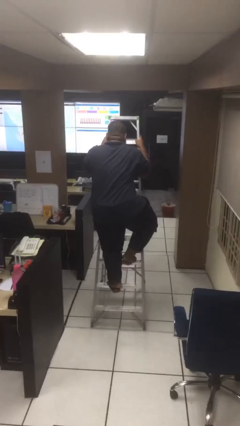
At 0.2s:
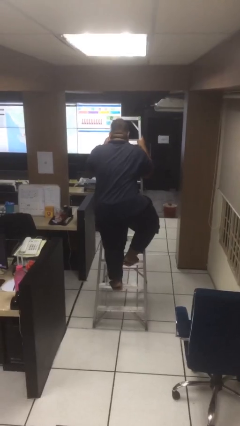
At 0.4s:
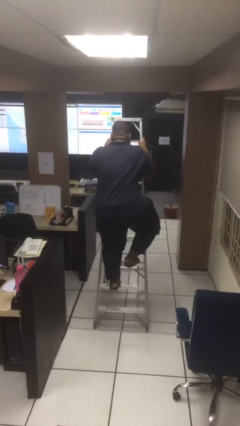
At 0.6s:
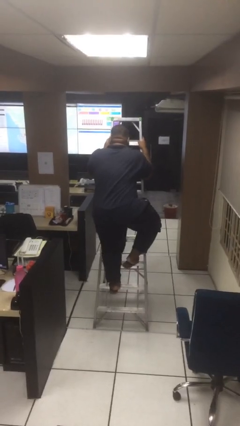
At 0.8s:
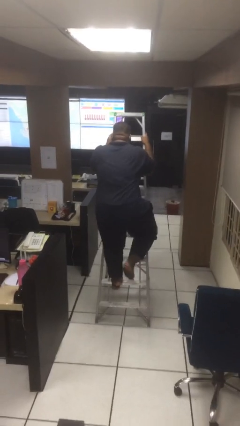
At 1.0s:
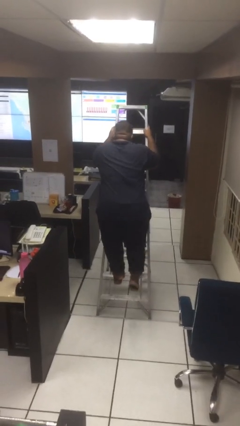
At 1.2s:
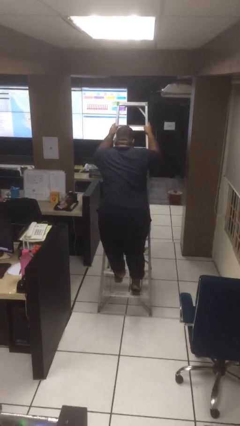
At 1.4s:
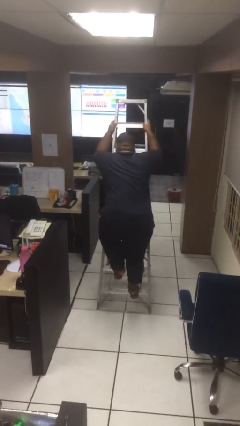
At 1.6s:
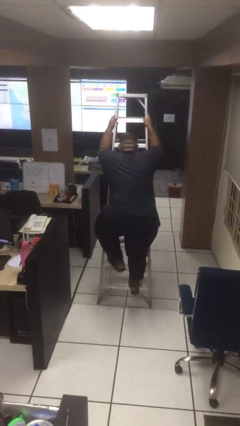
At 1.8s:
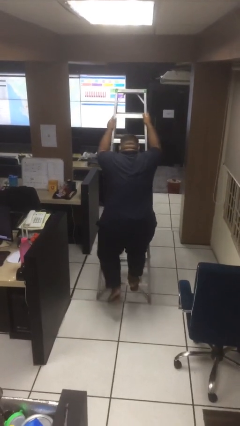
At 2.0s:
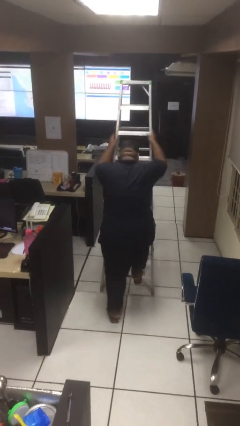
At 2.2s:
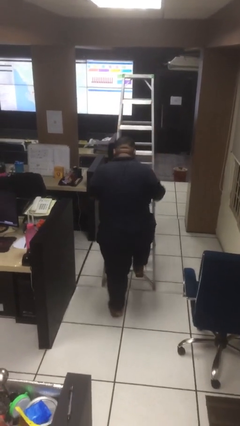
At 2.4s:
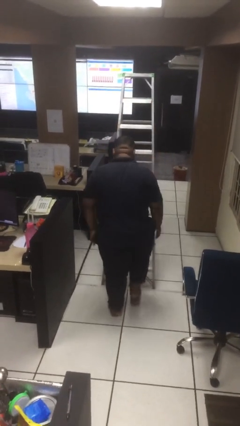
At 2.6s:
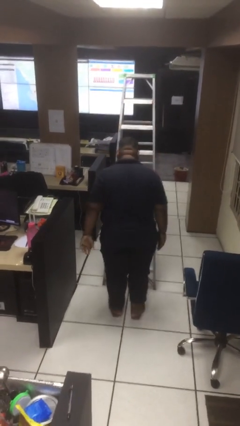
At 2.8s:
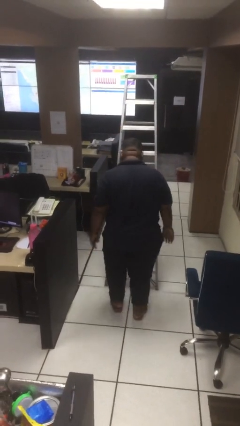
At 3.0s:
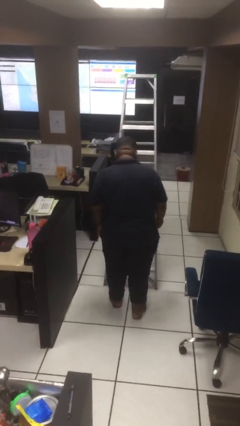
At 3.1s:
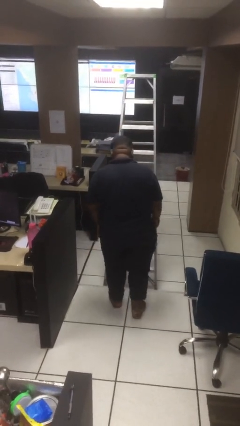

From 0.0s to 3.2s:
person climbs down ladder

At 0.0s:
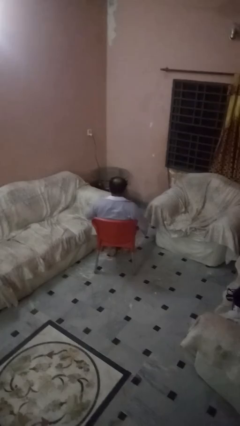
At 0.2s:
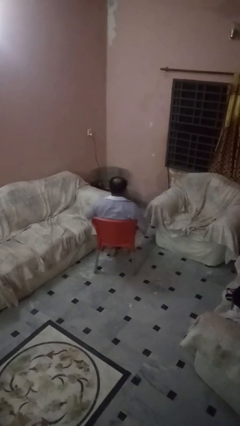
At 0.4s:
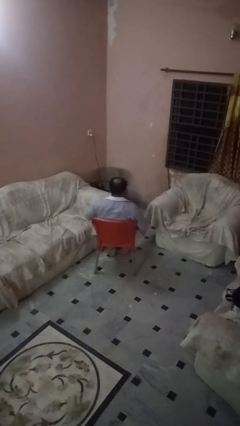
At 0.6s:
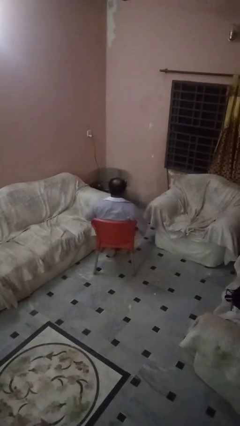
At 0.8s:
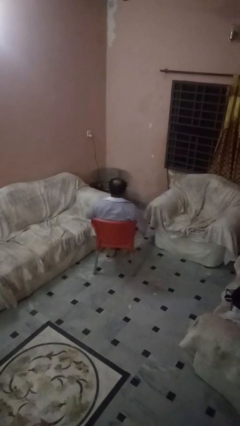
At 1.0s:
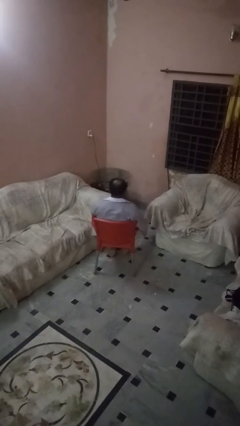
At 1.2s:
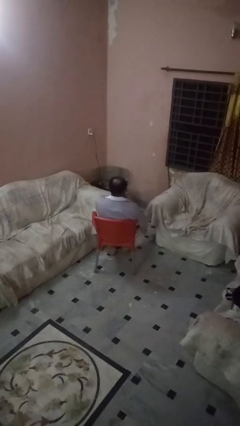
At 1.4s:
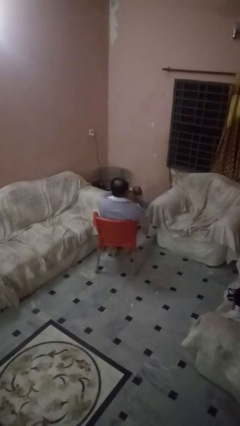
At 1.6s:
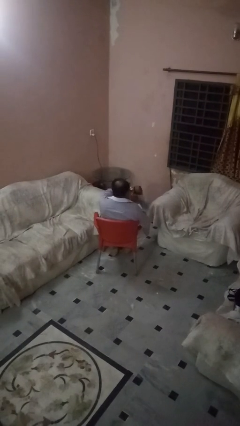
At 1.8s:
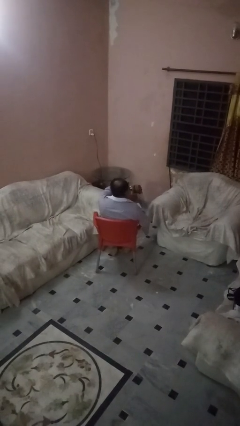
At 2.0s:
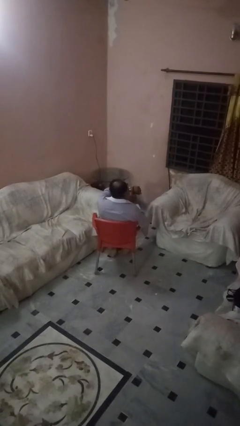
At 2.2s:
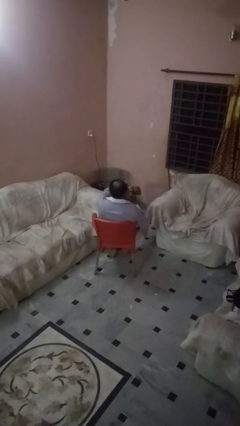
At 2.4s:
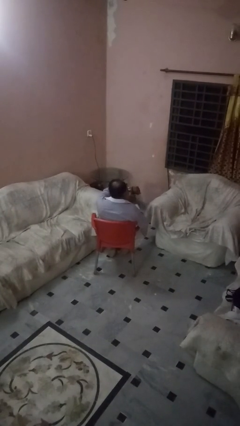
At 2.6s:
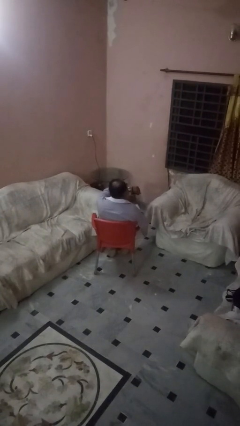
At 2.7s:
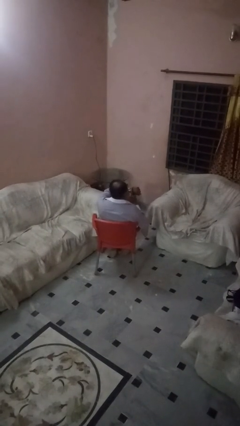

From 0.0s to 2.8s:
person gestures watch closely

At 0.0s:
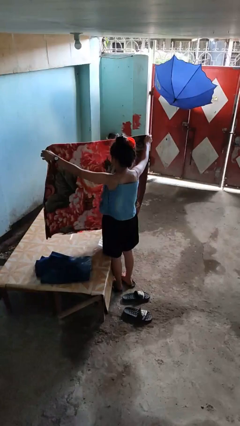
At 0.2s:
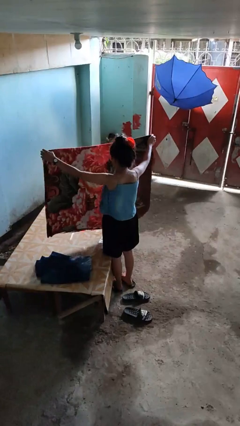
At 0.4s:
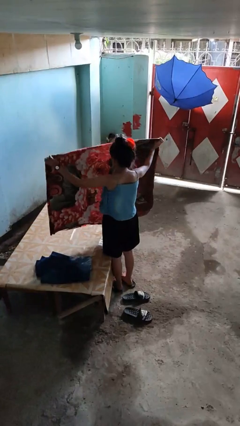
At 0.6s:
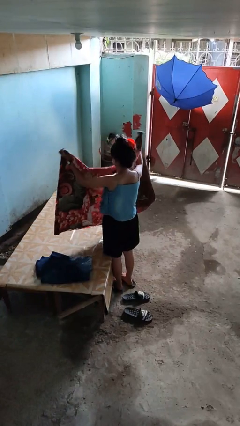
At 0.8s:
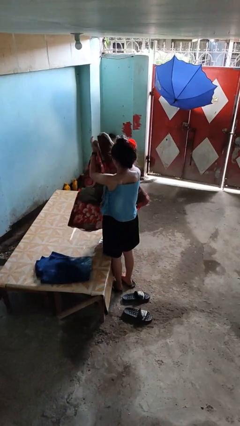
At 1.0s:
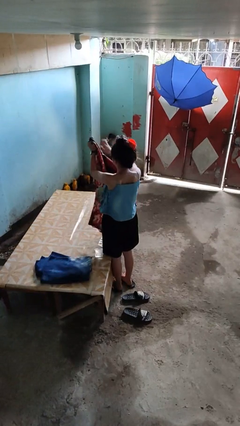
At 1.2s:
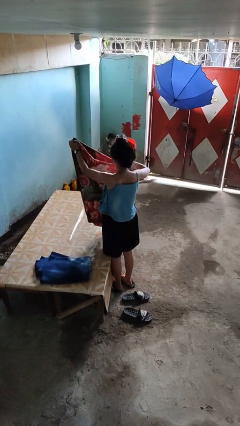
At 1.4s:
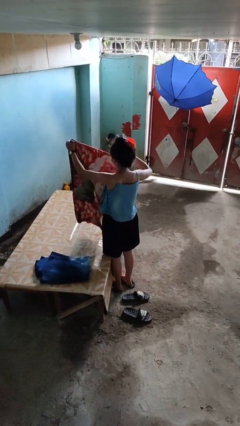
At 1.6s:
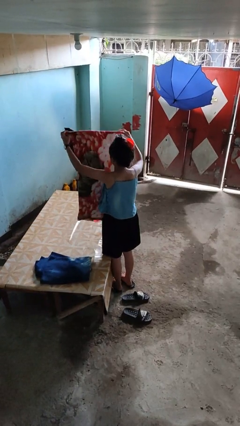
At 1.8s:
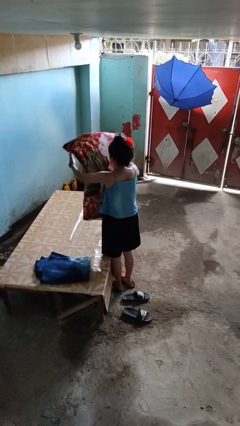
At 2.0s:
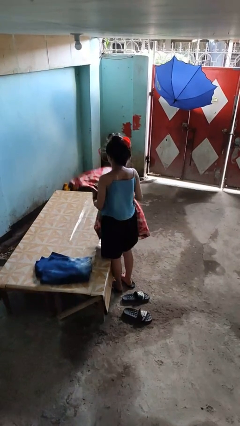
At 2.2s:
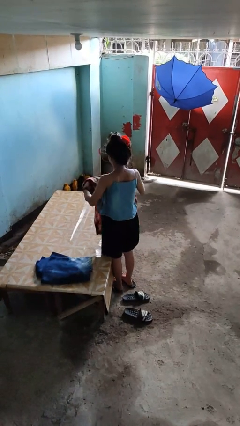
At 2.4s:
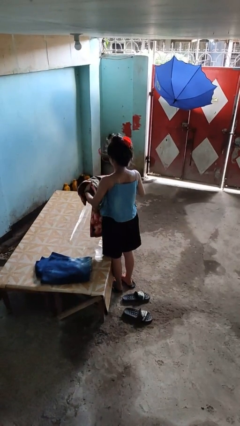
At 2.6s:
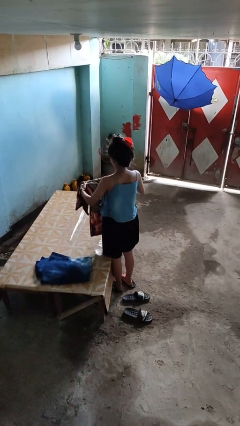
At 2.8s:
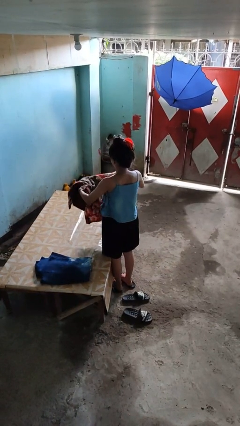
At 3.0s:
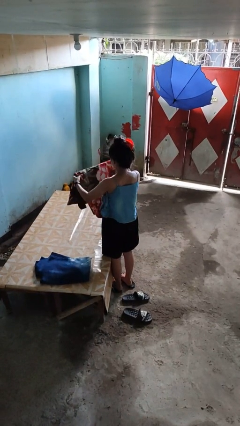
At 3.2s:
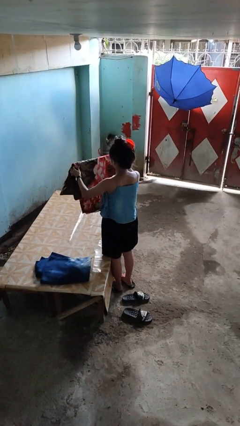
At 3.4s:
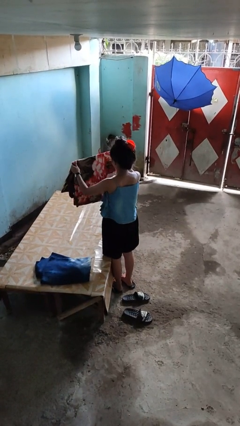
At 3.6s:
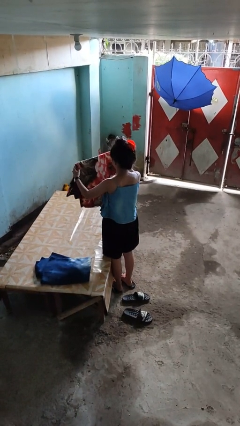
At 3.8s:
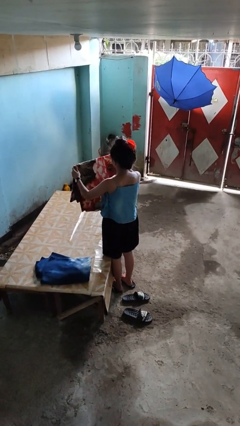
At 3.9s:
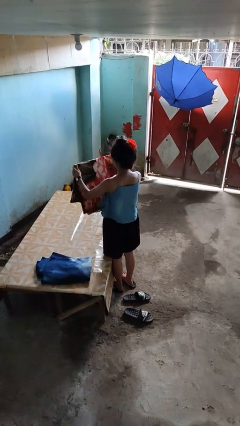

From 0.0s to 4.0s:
person folds blanket

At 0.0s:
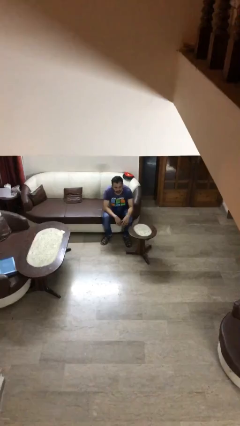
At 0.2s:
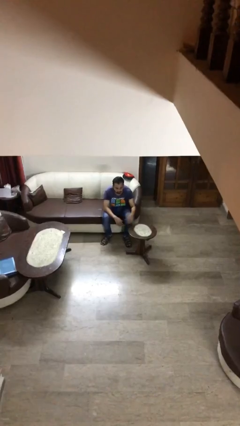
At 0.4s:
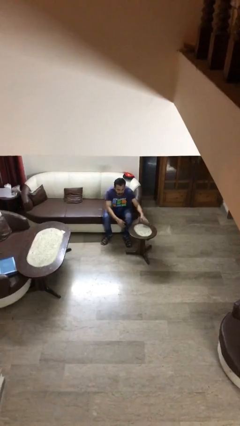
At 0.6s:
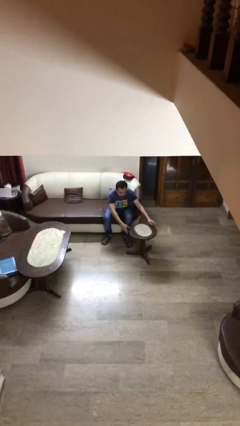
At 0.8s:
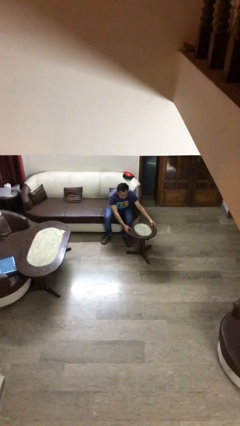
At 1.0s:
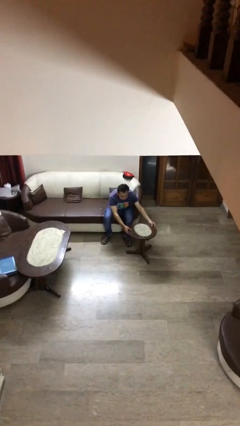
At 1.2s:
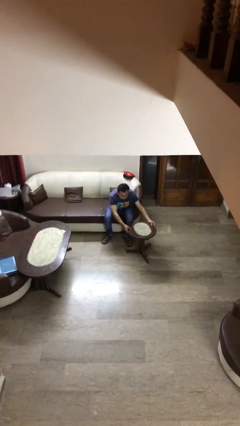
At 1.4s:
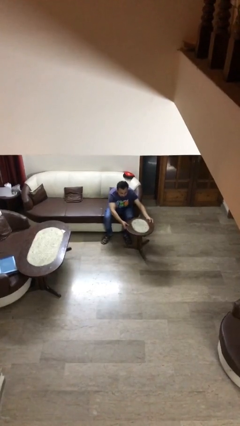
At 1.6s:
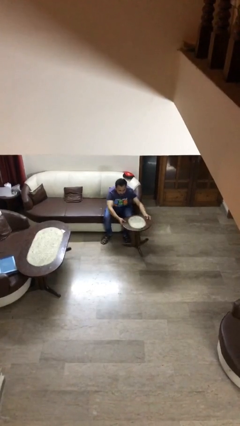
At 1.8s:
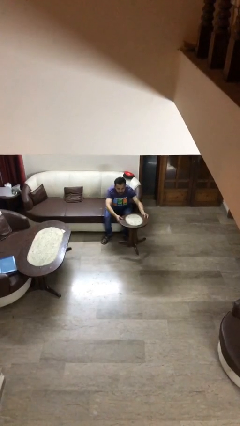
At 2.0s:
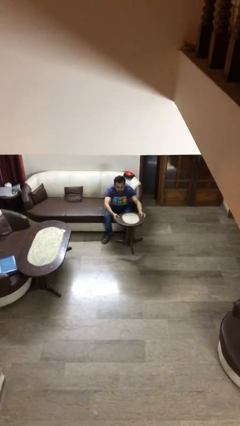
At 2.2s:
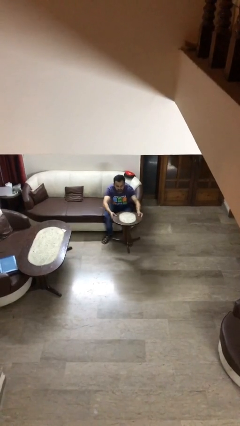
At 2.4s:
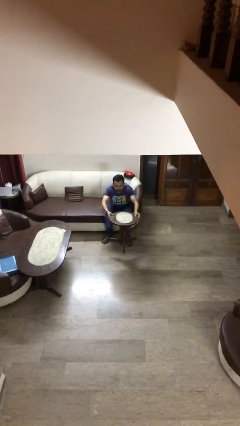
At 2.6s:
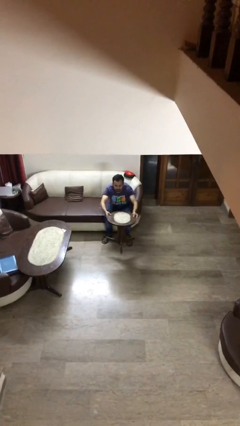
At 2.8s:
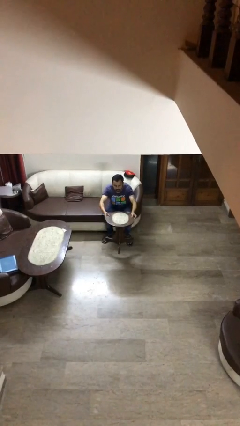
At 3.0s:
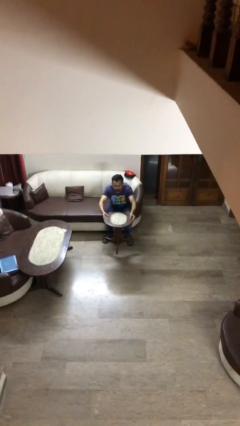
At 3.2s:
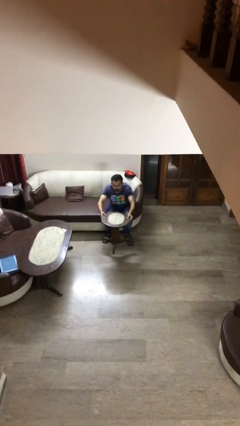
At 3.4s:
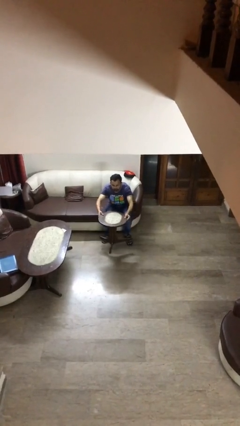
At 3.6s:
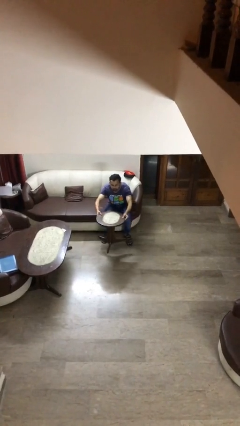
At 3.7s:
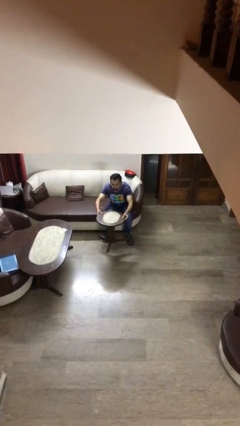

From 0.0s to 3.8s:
person picks up object from floor

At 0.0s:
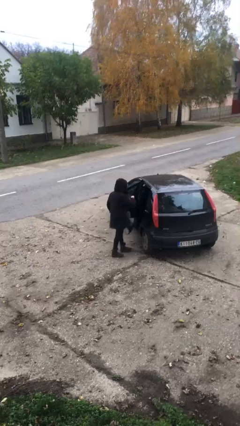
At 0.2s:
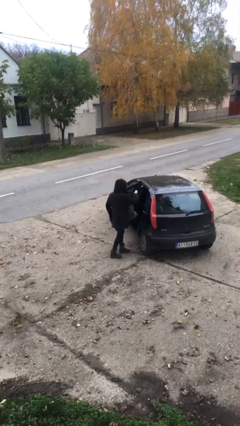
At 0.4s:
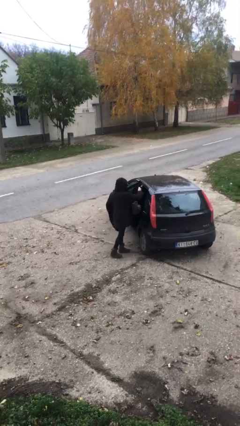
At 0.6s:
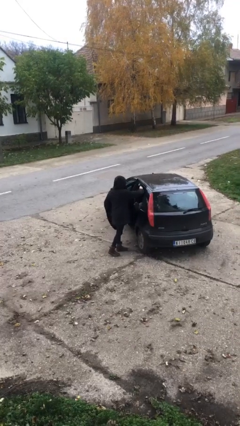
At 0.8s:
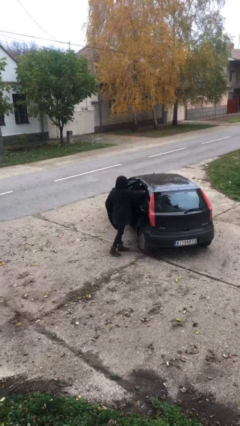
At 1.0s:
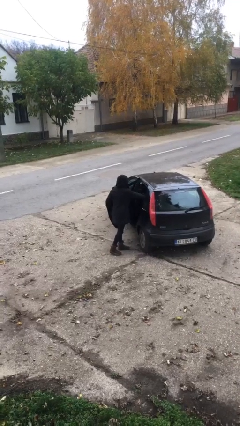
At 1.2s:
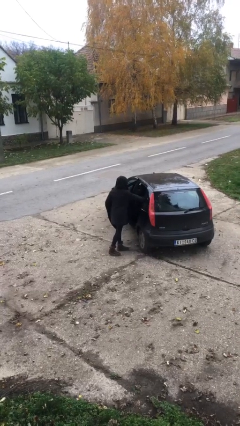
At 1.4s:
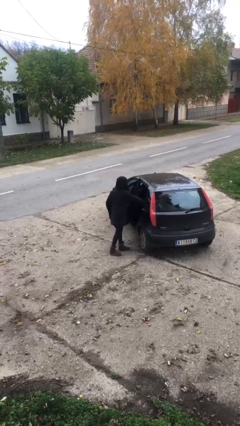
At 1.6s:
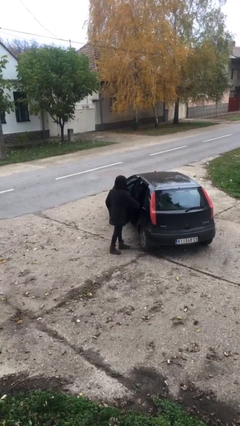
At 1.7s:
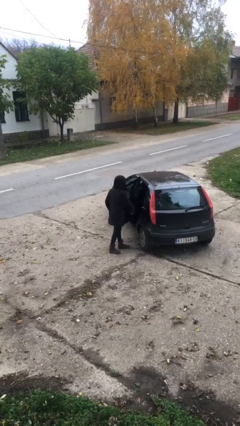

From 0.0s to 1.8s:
person loads car

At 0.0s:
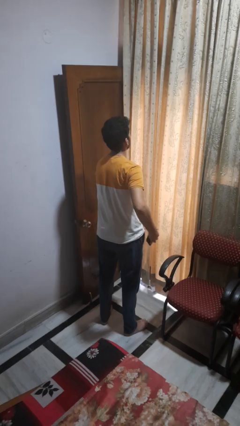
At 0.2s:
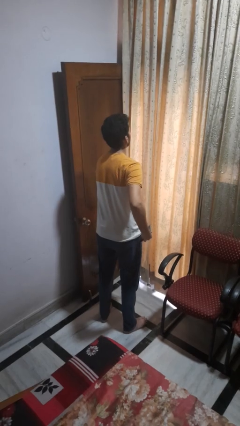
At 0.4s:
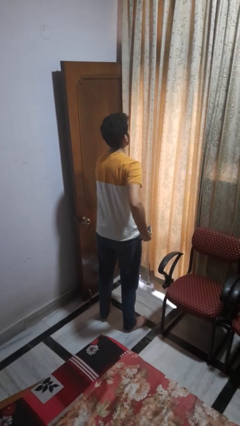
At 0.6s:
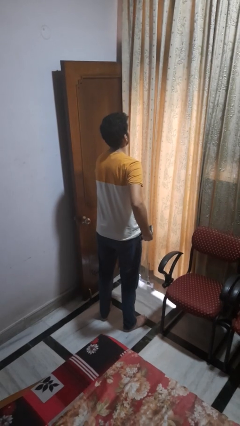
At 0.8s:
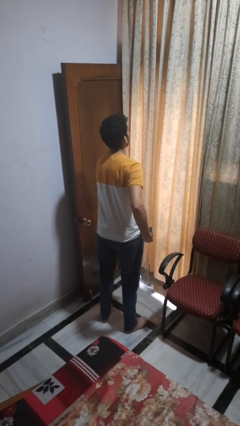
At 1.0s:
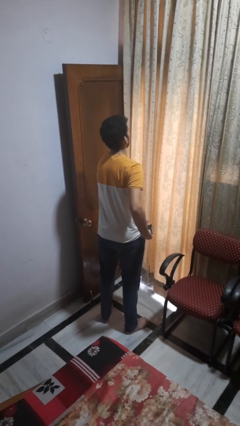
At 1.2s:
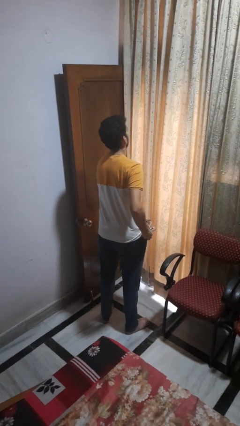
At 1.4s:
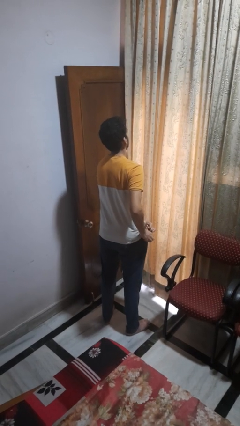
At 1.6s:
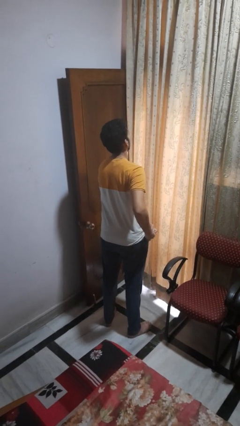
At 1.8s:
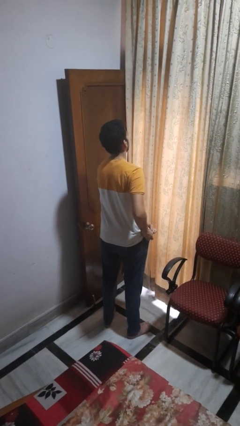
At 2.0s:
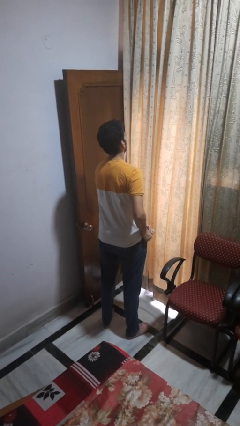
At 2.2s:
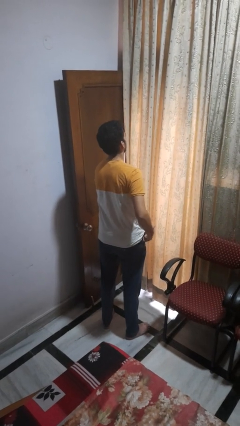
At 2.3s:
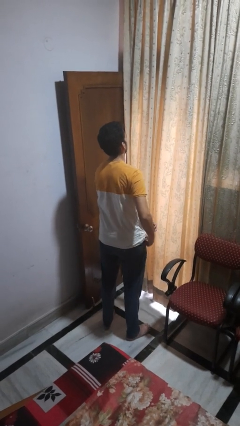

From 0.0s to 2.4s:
person puts phone into pocket
